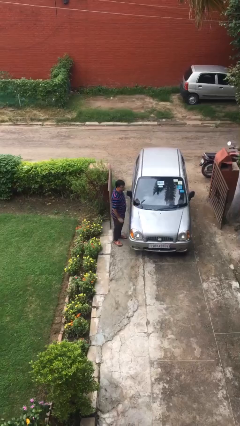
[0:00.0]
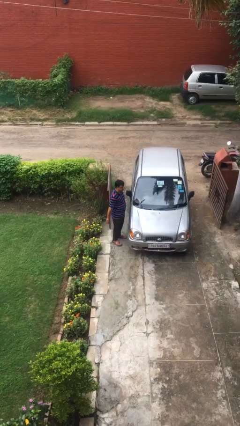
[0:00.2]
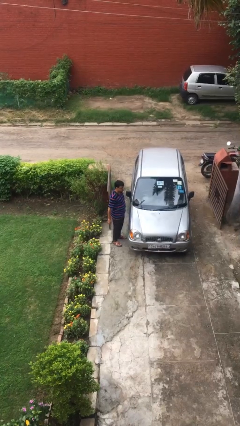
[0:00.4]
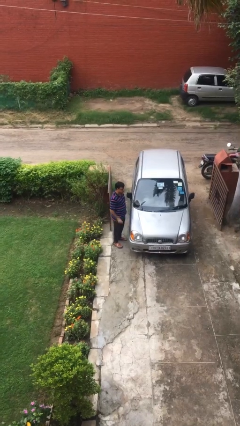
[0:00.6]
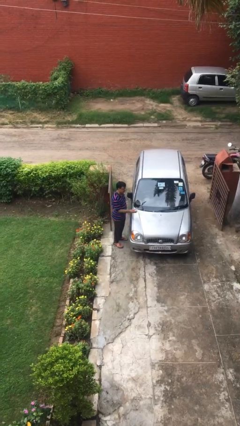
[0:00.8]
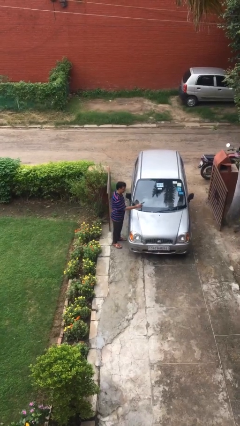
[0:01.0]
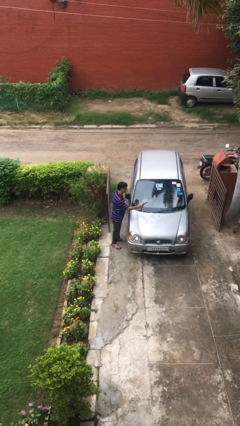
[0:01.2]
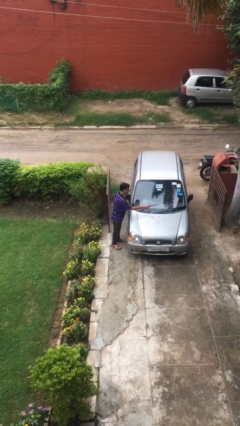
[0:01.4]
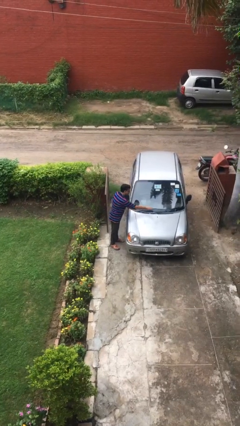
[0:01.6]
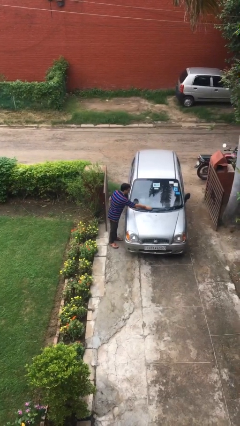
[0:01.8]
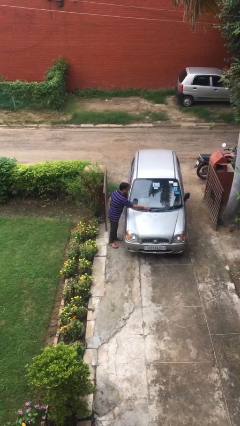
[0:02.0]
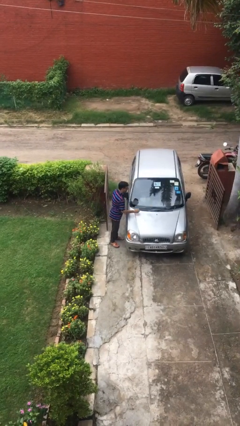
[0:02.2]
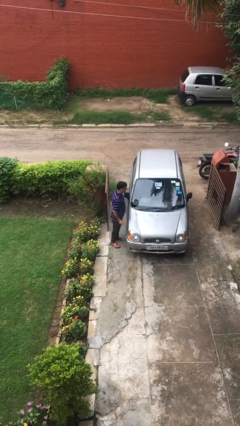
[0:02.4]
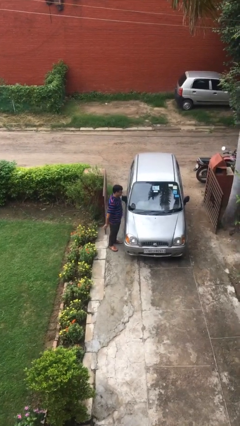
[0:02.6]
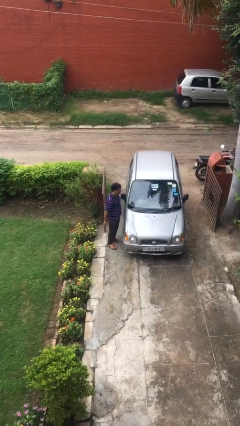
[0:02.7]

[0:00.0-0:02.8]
person flips down car wipers

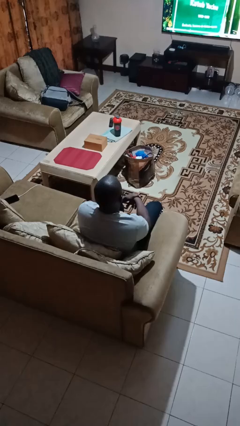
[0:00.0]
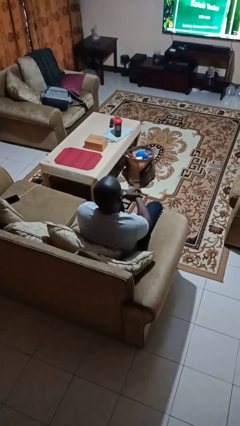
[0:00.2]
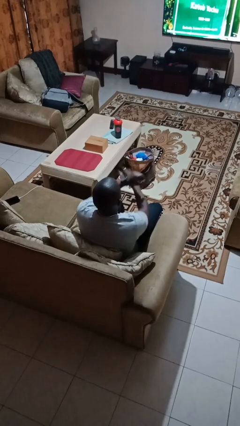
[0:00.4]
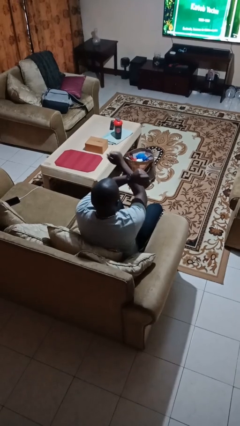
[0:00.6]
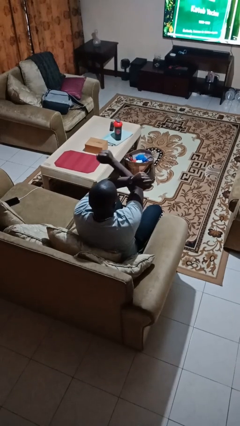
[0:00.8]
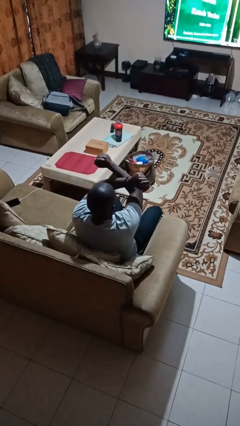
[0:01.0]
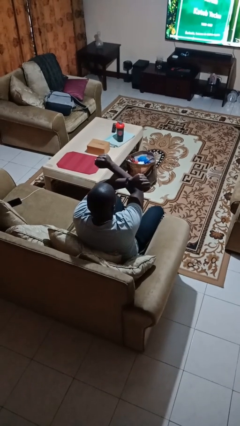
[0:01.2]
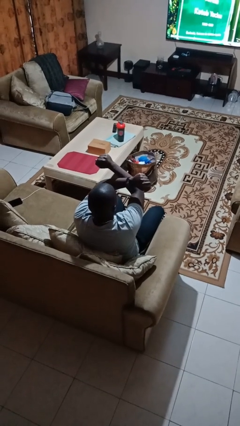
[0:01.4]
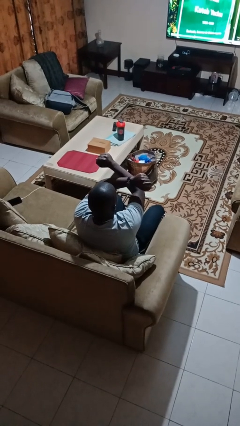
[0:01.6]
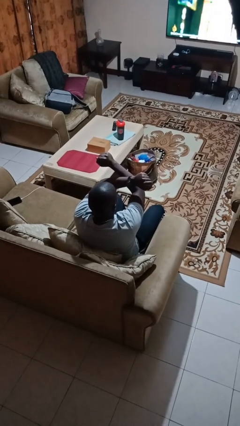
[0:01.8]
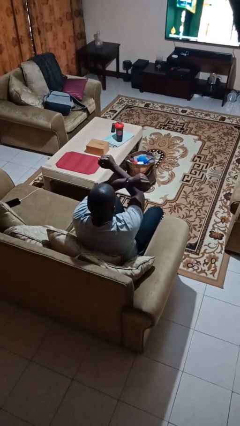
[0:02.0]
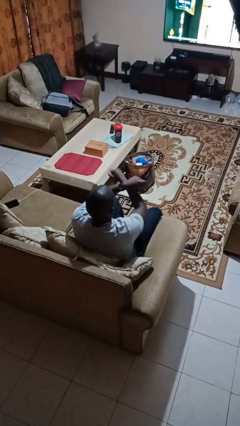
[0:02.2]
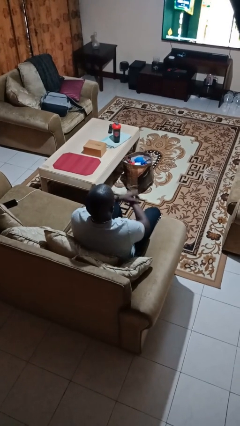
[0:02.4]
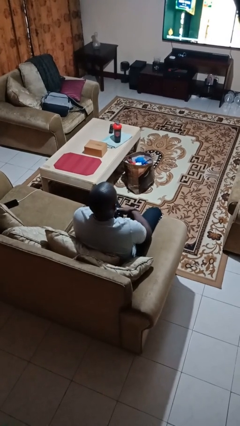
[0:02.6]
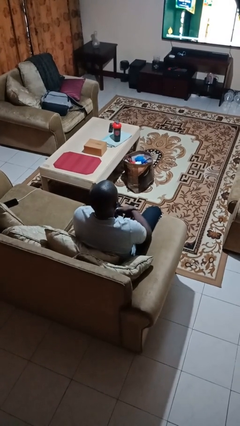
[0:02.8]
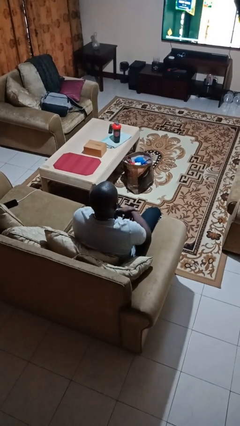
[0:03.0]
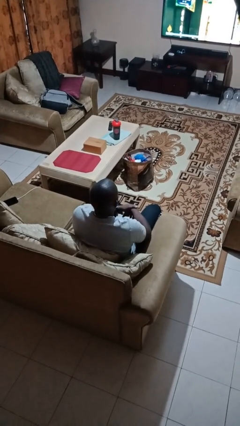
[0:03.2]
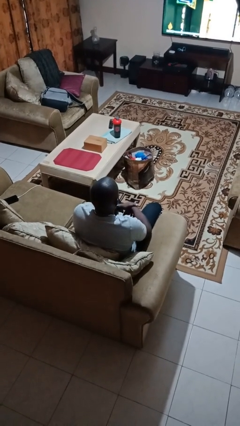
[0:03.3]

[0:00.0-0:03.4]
person gestures arms x

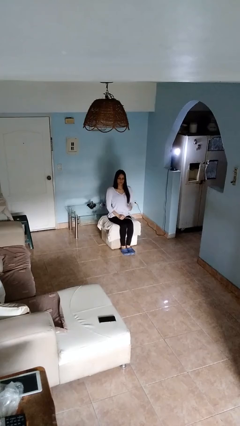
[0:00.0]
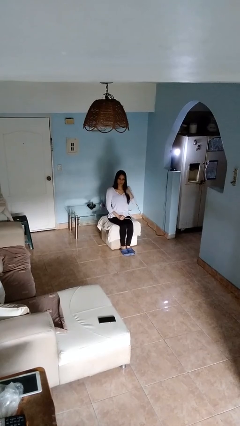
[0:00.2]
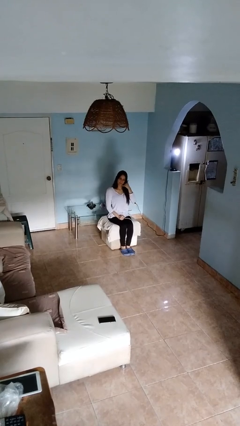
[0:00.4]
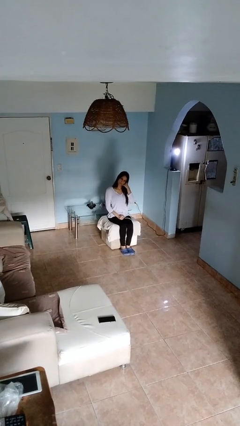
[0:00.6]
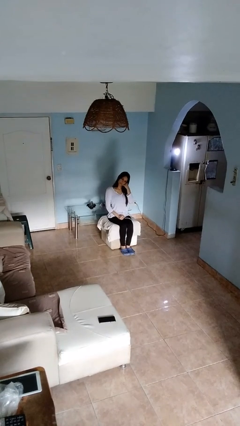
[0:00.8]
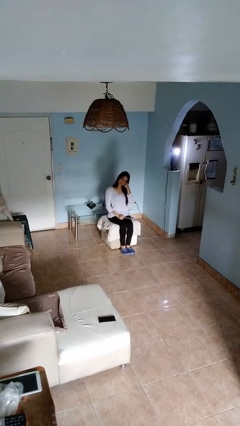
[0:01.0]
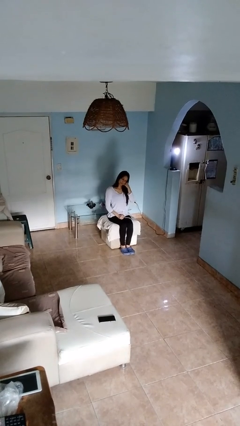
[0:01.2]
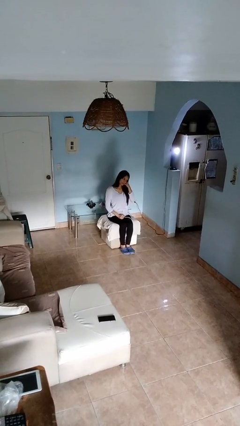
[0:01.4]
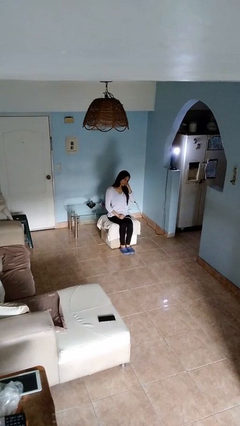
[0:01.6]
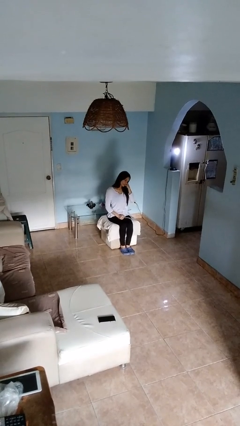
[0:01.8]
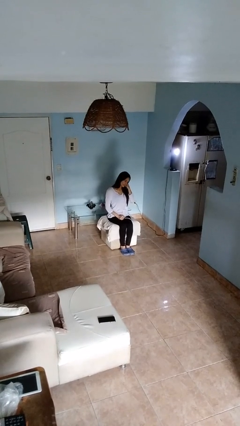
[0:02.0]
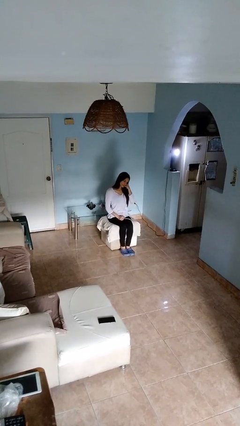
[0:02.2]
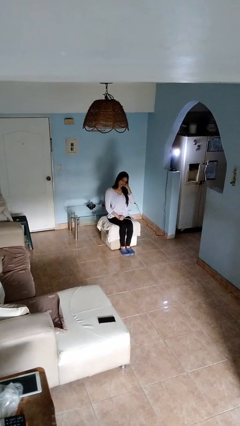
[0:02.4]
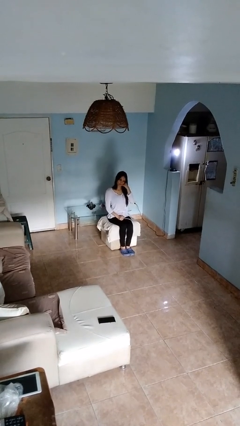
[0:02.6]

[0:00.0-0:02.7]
person gestures call me

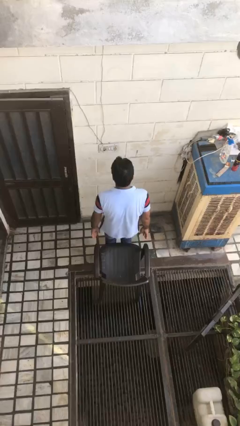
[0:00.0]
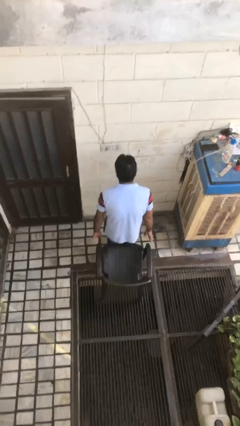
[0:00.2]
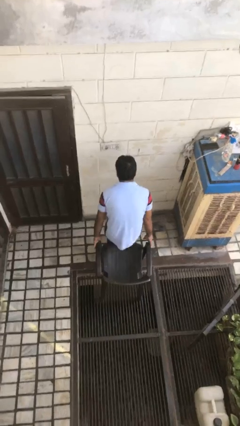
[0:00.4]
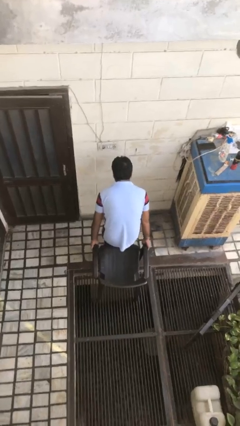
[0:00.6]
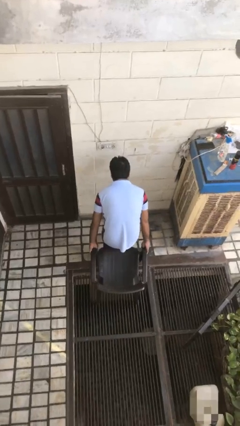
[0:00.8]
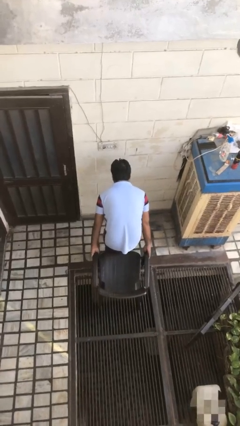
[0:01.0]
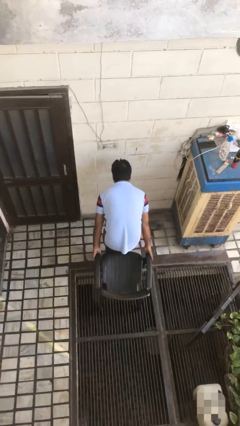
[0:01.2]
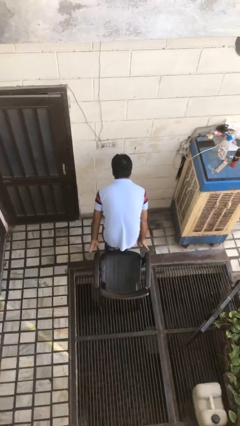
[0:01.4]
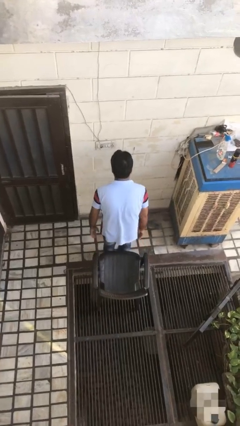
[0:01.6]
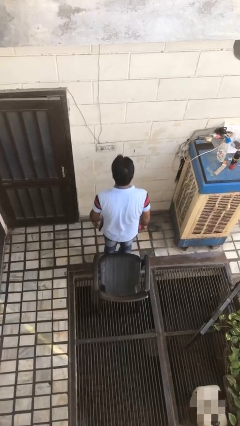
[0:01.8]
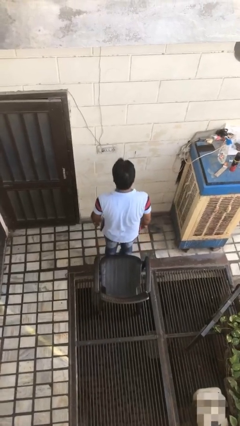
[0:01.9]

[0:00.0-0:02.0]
person pushes in chair

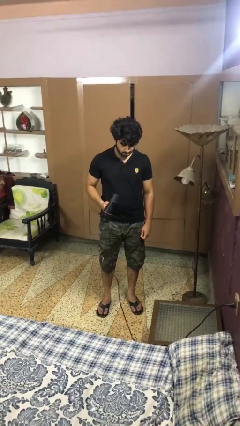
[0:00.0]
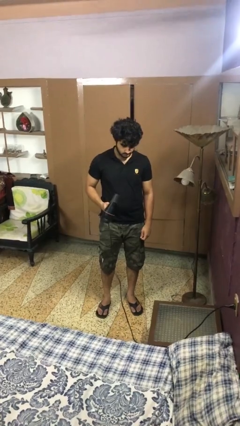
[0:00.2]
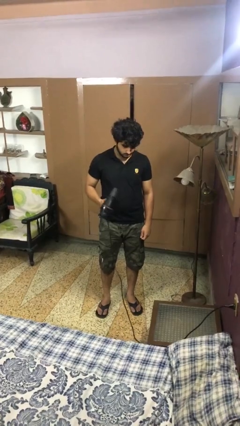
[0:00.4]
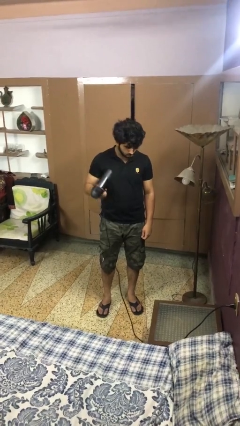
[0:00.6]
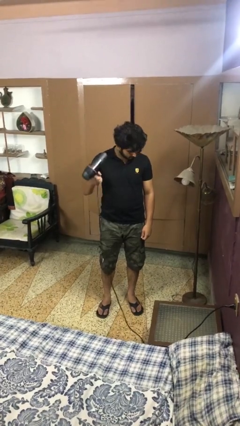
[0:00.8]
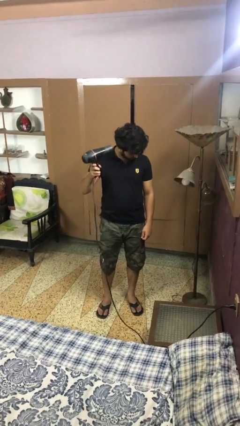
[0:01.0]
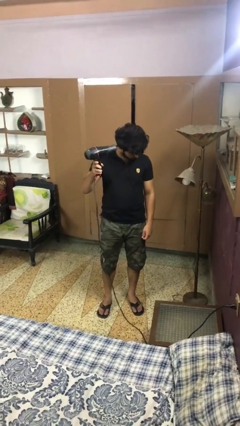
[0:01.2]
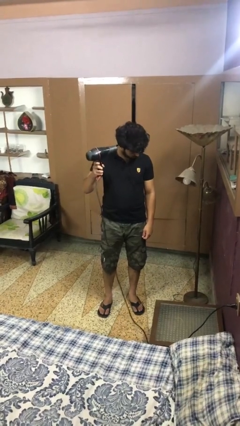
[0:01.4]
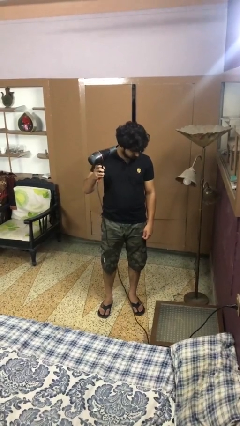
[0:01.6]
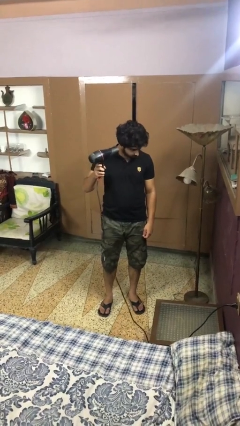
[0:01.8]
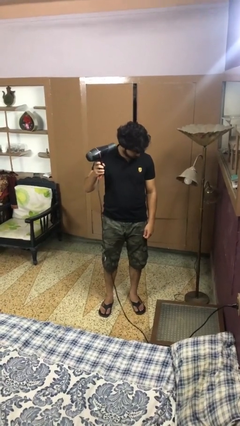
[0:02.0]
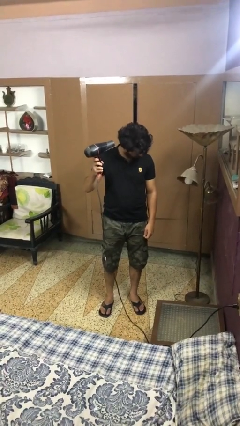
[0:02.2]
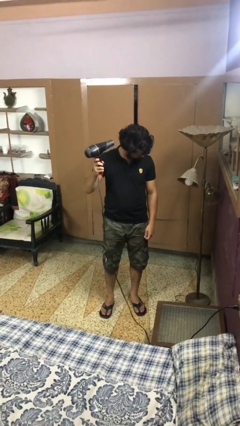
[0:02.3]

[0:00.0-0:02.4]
person dries hair with hairdryer

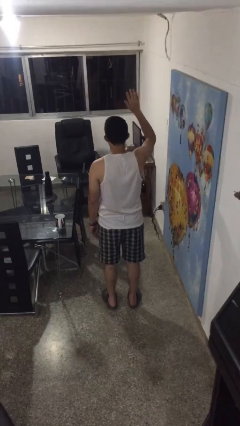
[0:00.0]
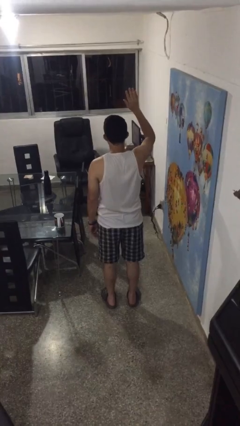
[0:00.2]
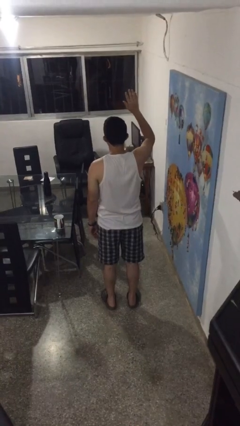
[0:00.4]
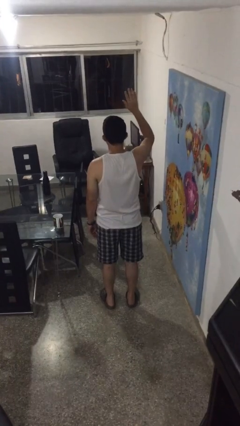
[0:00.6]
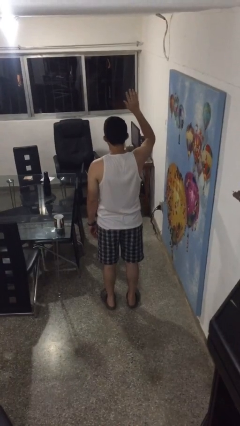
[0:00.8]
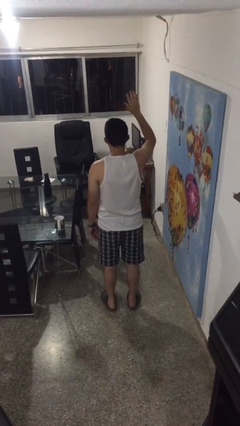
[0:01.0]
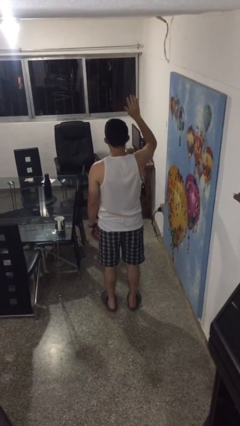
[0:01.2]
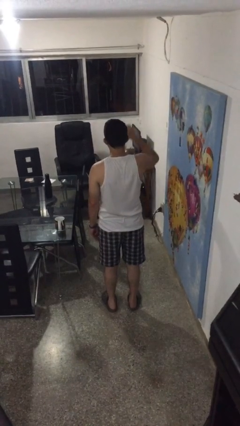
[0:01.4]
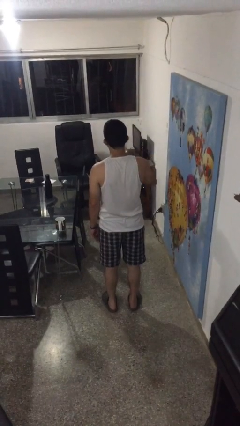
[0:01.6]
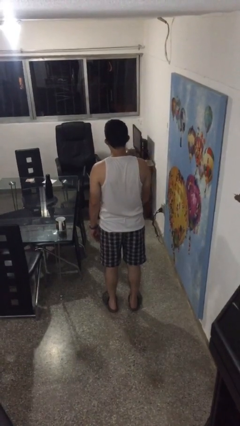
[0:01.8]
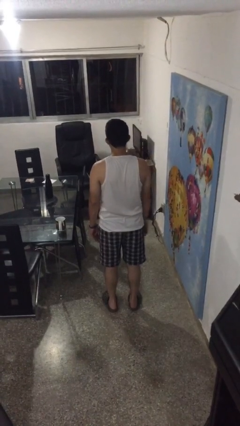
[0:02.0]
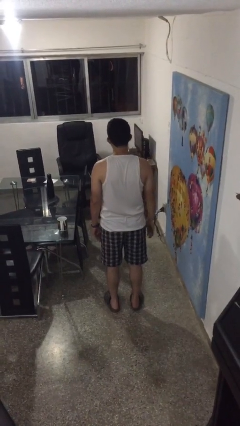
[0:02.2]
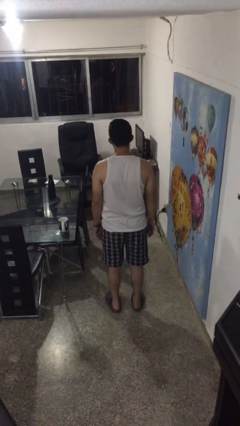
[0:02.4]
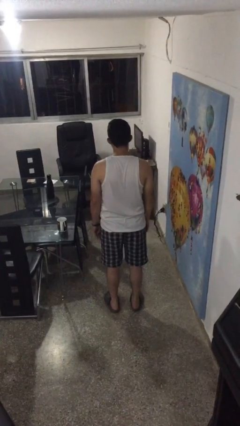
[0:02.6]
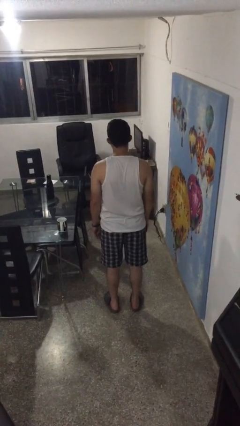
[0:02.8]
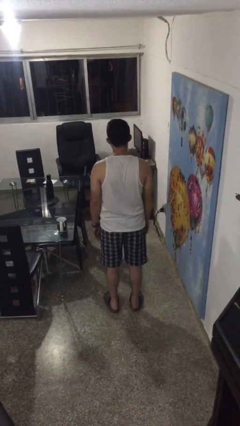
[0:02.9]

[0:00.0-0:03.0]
person gestures lower hand

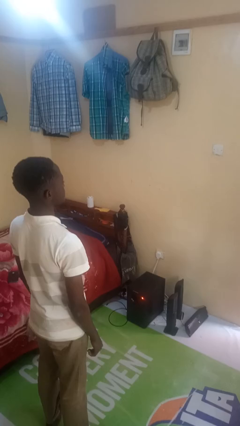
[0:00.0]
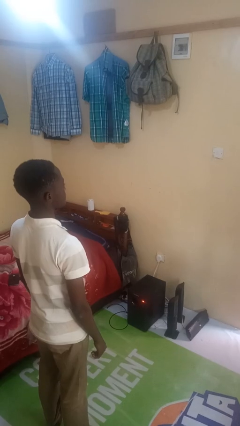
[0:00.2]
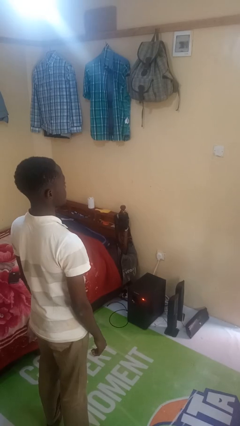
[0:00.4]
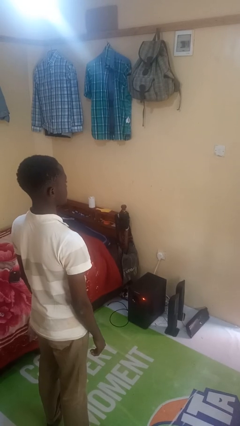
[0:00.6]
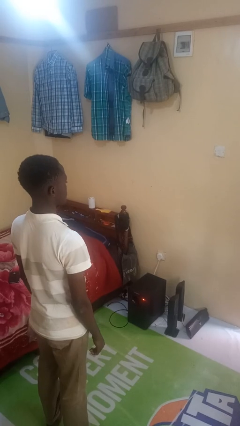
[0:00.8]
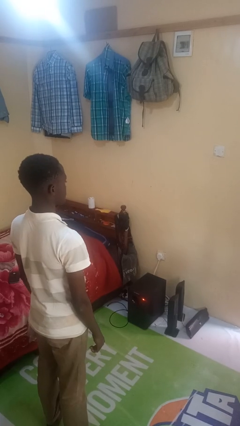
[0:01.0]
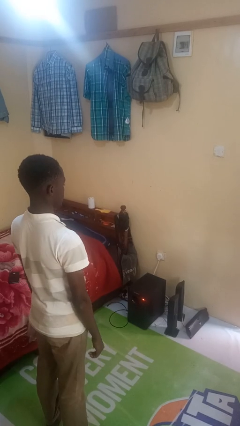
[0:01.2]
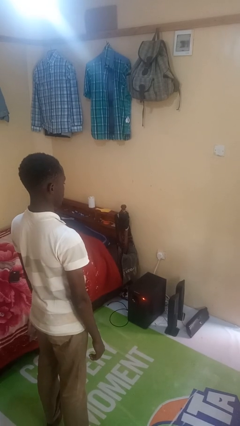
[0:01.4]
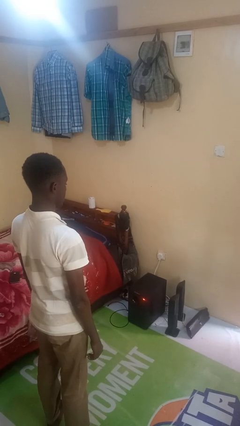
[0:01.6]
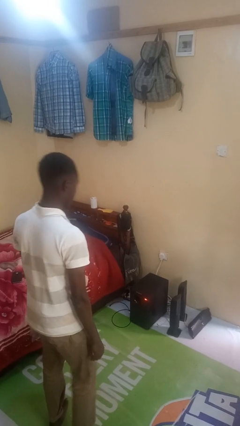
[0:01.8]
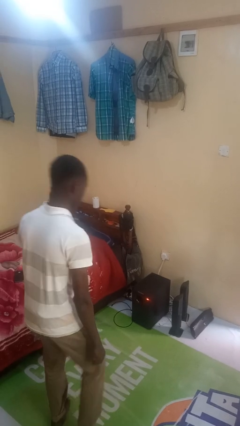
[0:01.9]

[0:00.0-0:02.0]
person stands up from floor
